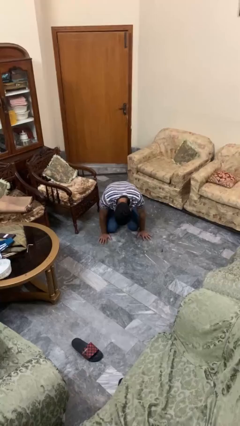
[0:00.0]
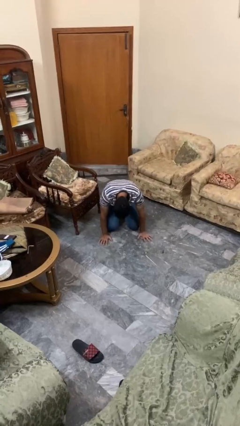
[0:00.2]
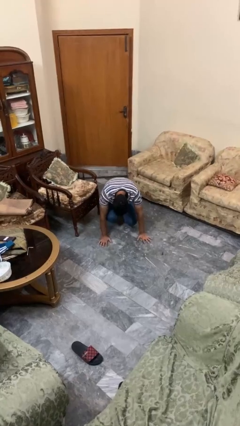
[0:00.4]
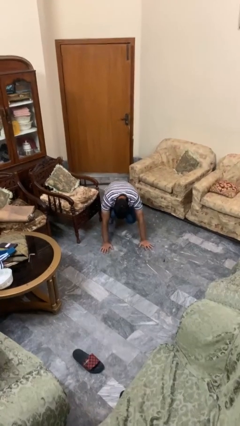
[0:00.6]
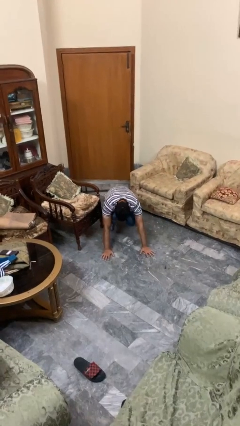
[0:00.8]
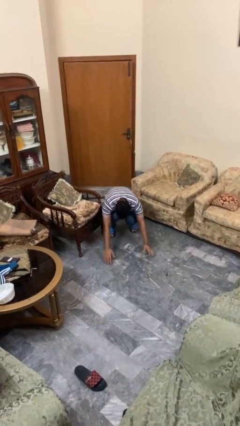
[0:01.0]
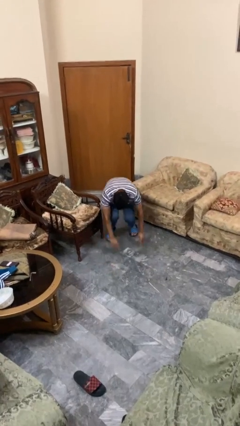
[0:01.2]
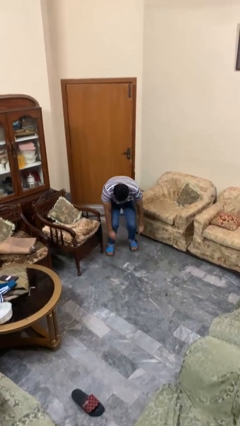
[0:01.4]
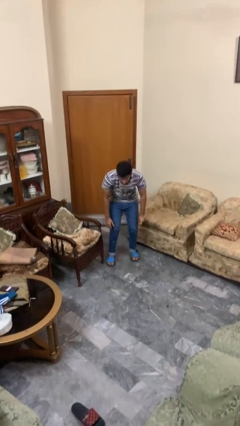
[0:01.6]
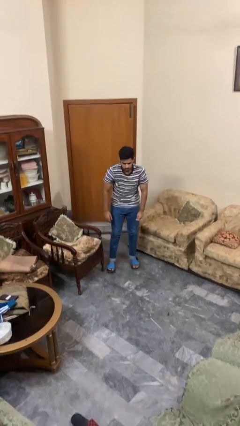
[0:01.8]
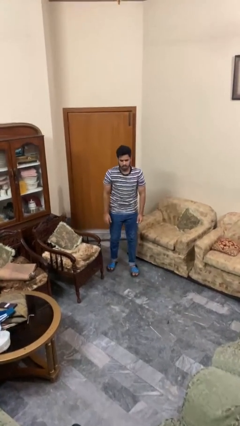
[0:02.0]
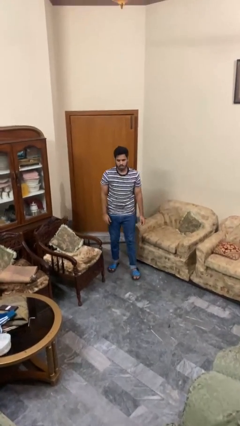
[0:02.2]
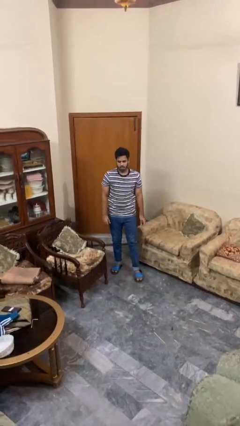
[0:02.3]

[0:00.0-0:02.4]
person stands up from floor

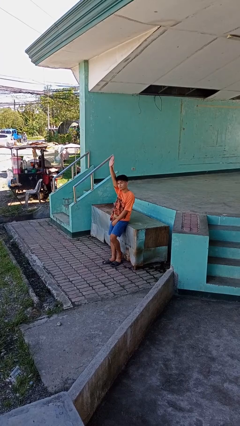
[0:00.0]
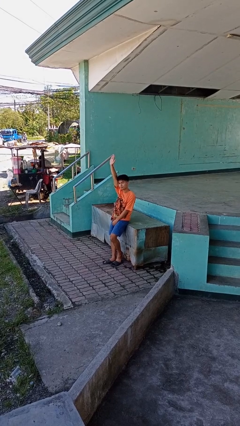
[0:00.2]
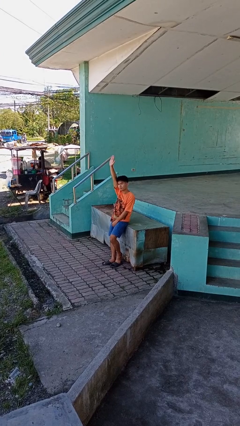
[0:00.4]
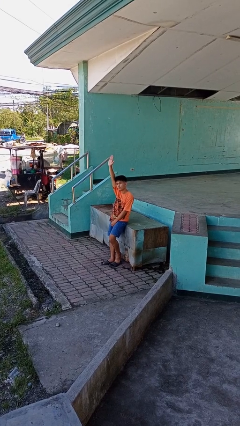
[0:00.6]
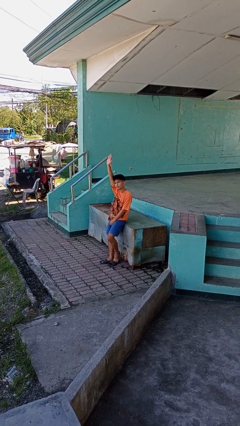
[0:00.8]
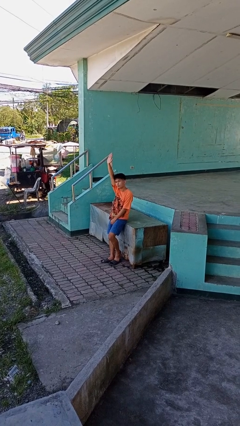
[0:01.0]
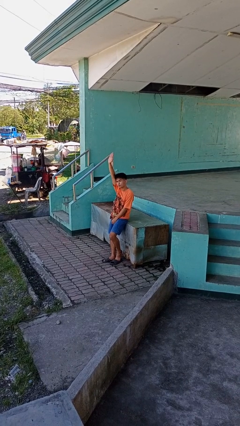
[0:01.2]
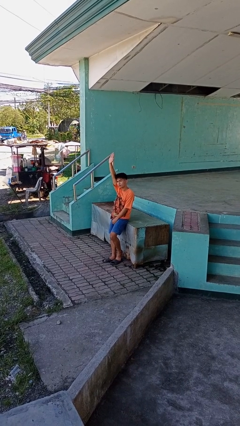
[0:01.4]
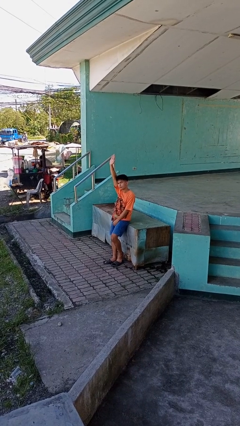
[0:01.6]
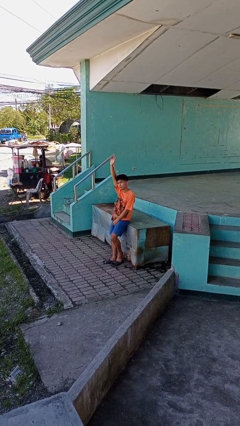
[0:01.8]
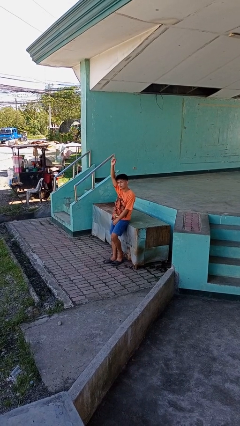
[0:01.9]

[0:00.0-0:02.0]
person gestures raise hand

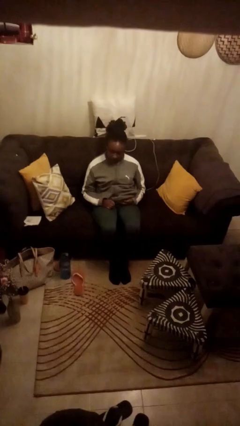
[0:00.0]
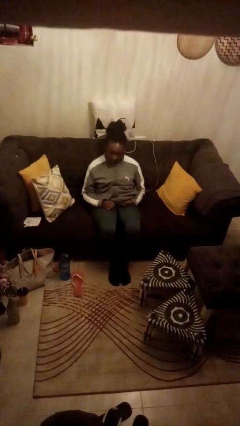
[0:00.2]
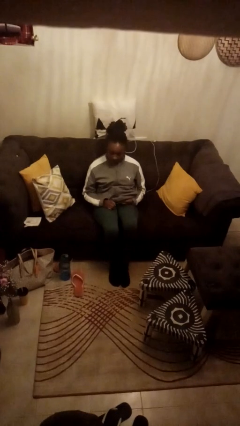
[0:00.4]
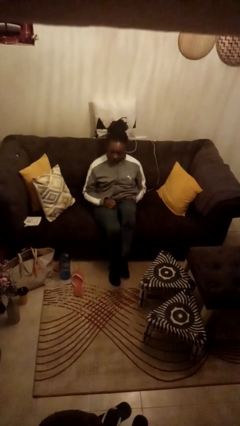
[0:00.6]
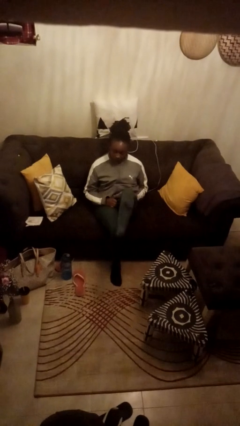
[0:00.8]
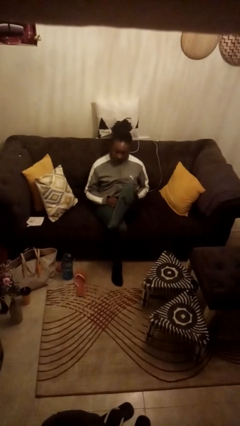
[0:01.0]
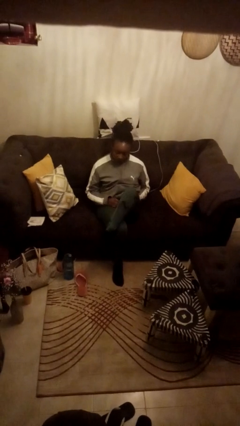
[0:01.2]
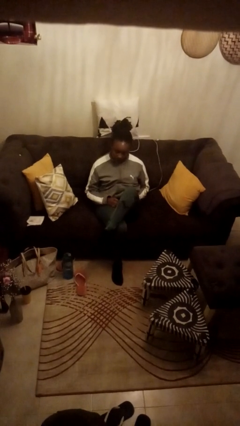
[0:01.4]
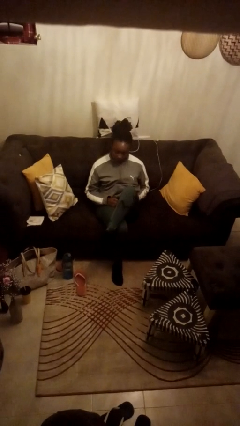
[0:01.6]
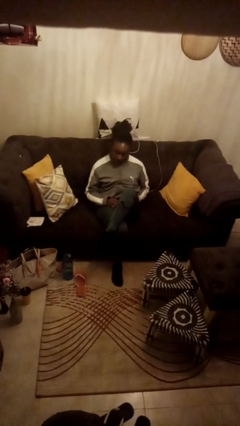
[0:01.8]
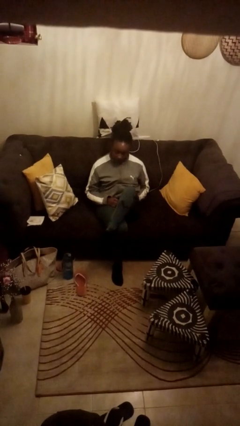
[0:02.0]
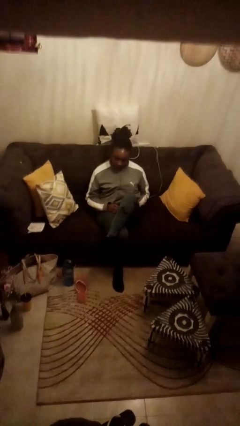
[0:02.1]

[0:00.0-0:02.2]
person crosses legs

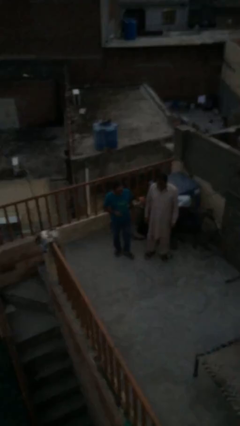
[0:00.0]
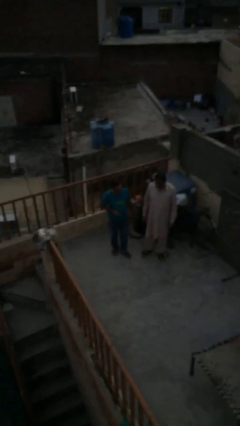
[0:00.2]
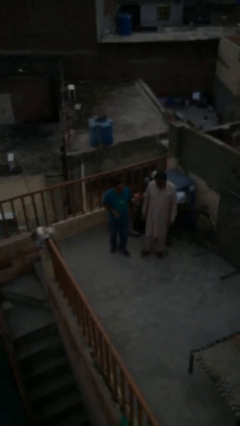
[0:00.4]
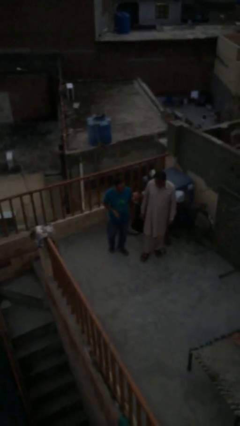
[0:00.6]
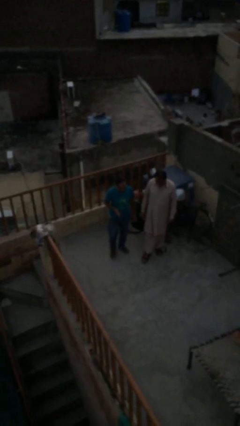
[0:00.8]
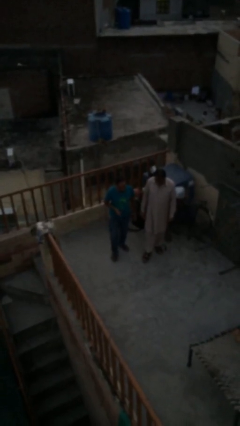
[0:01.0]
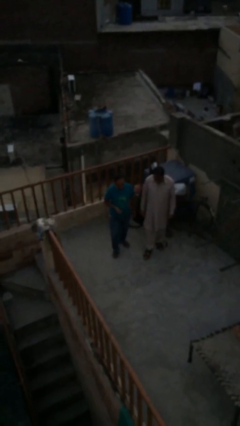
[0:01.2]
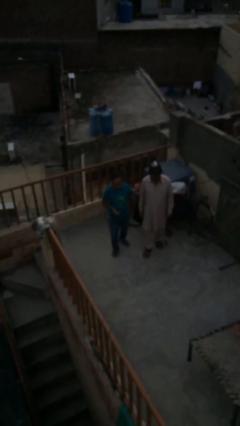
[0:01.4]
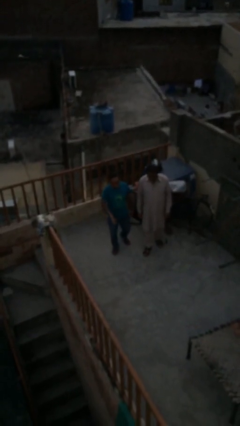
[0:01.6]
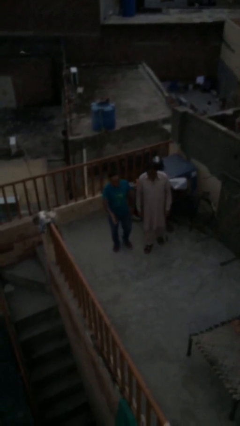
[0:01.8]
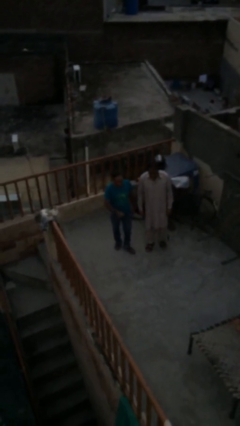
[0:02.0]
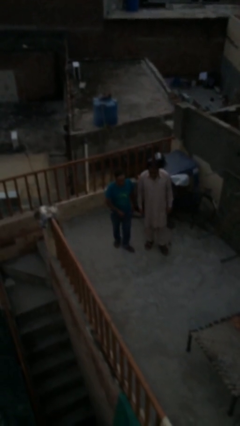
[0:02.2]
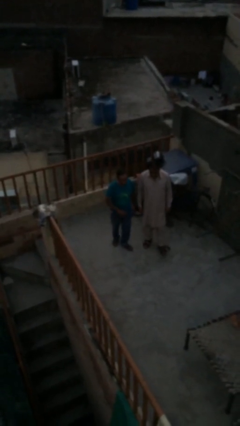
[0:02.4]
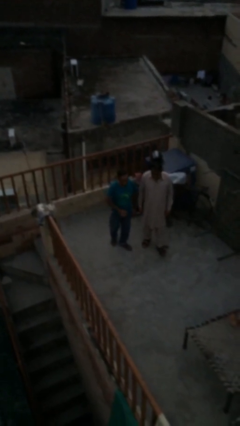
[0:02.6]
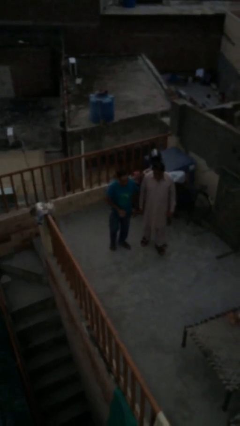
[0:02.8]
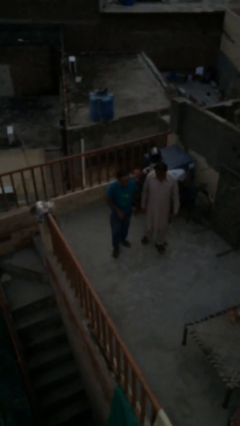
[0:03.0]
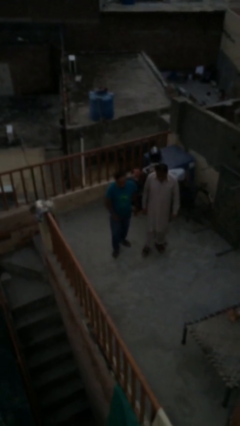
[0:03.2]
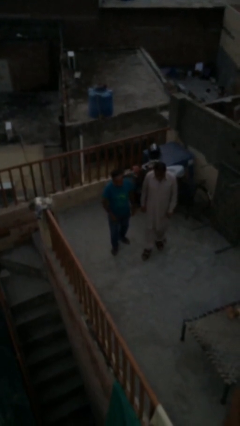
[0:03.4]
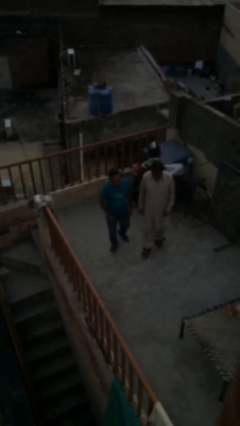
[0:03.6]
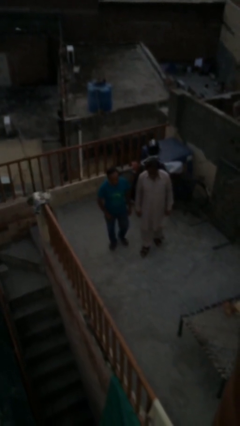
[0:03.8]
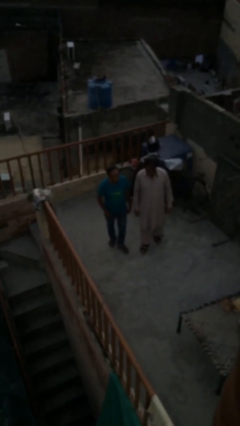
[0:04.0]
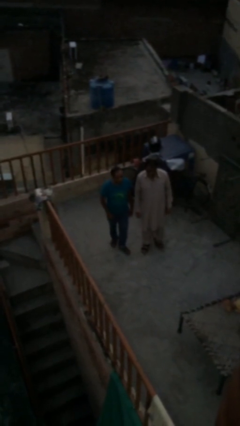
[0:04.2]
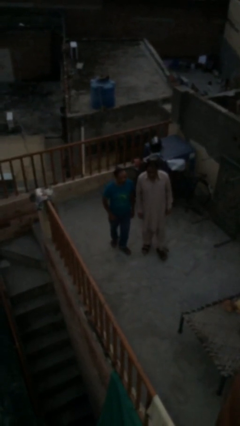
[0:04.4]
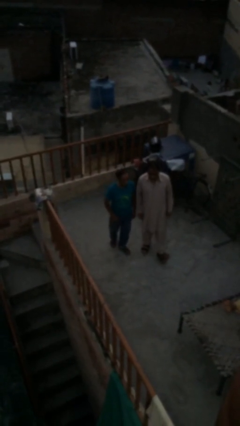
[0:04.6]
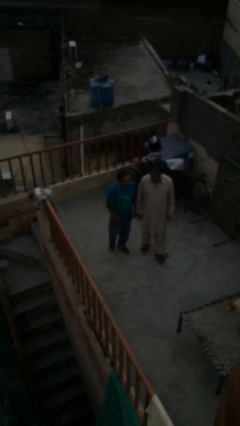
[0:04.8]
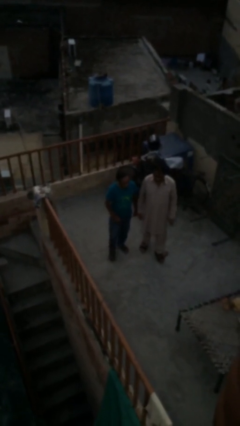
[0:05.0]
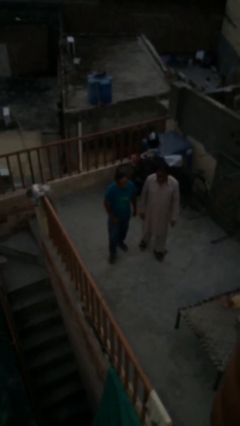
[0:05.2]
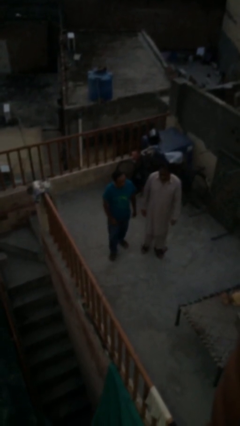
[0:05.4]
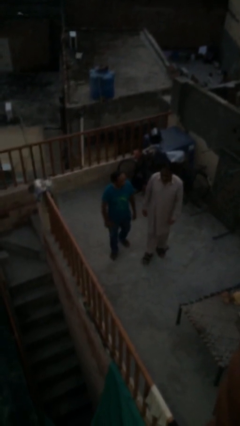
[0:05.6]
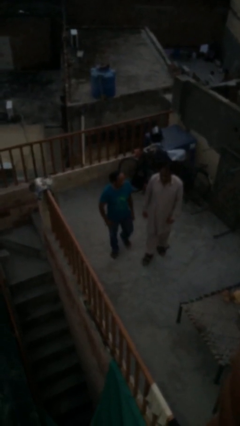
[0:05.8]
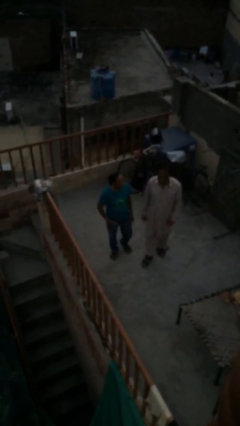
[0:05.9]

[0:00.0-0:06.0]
person talks to person

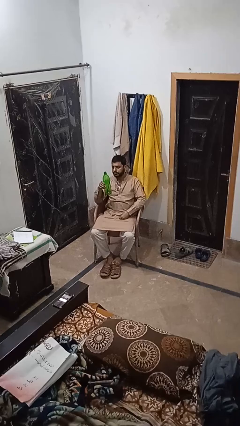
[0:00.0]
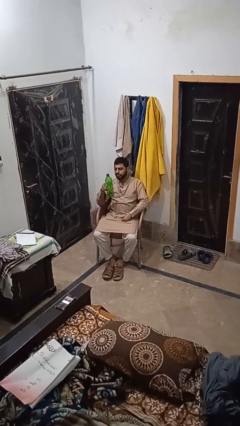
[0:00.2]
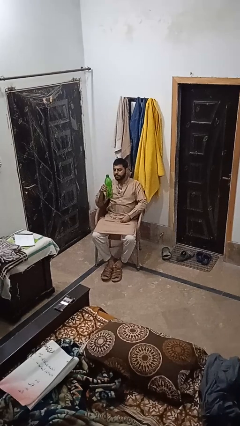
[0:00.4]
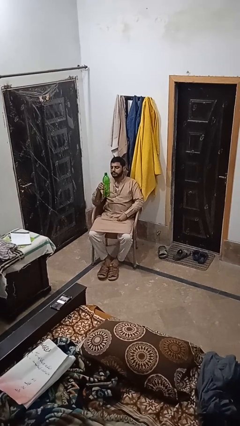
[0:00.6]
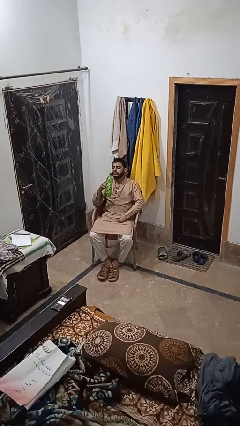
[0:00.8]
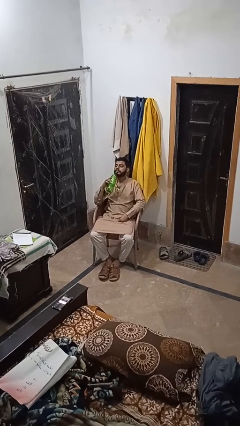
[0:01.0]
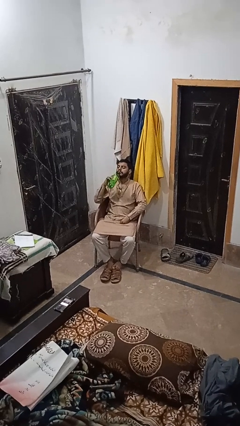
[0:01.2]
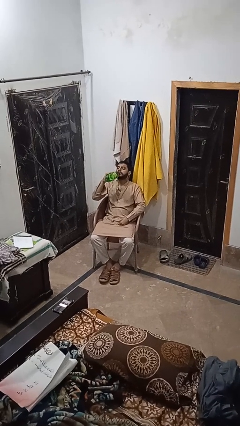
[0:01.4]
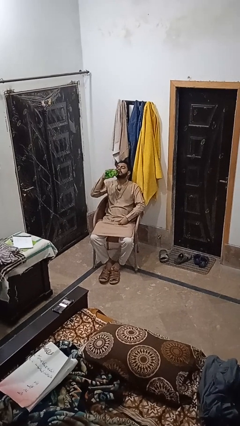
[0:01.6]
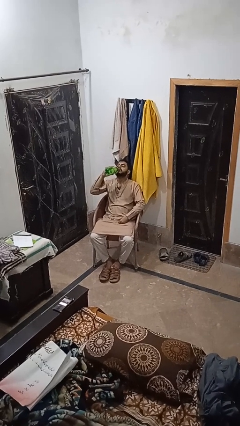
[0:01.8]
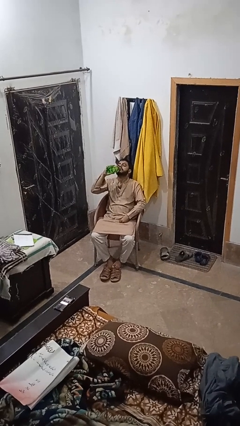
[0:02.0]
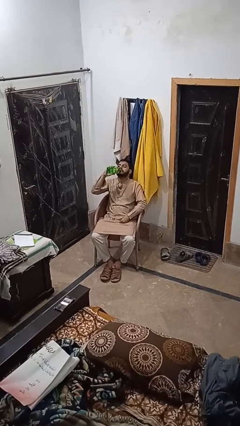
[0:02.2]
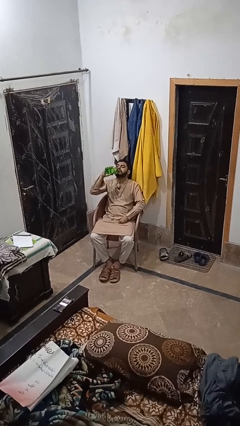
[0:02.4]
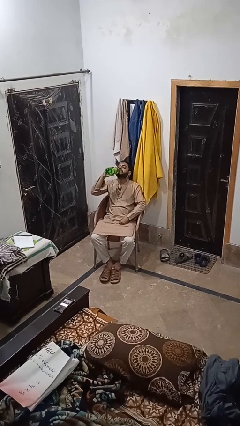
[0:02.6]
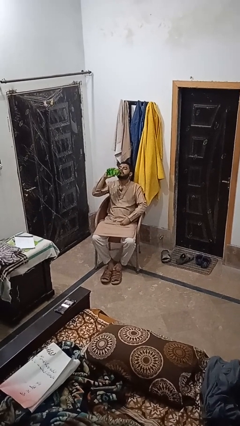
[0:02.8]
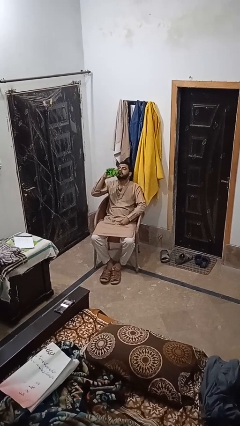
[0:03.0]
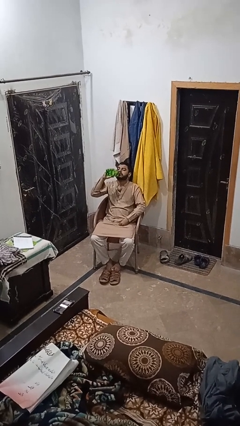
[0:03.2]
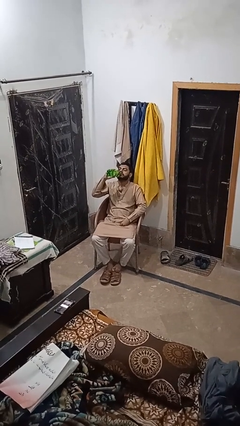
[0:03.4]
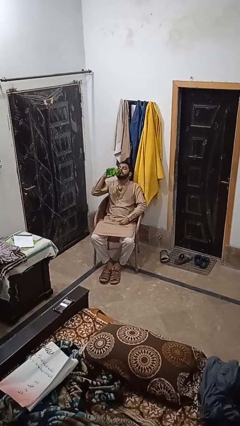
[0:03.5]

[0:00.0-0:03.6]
person drinks from bottle

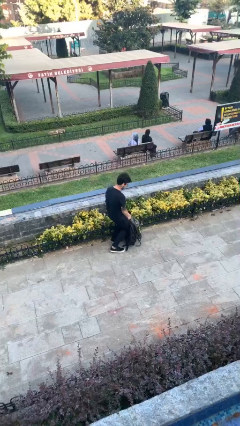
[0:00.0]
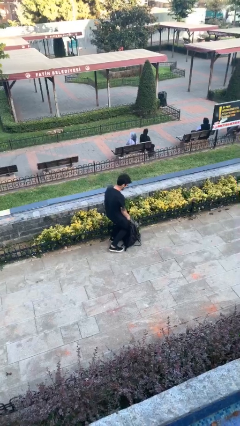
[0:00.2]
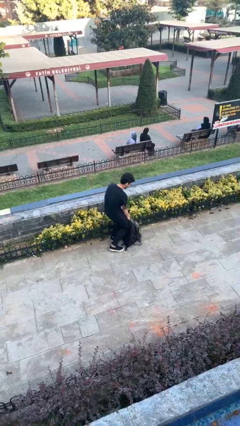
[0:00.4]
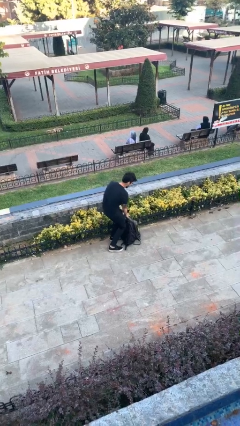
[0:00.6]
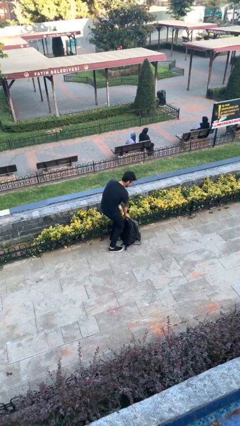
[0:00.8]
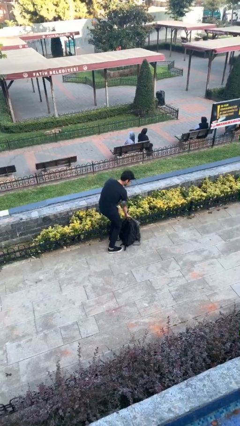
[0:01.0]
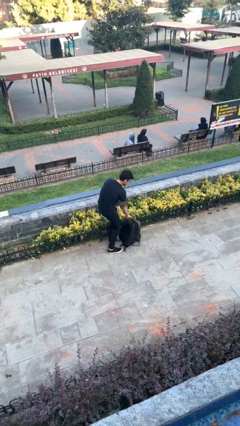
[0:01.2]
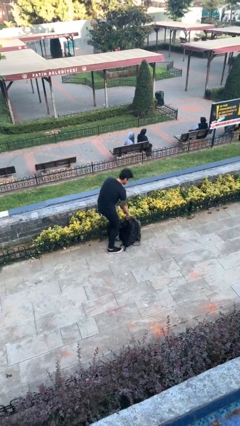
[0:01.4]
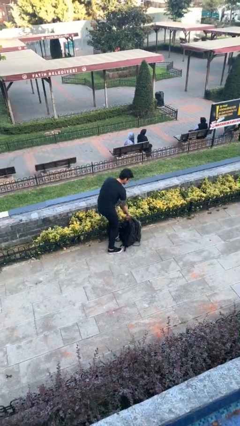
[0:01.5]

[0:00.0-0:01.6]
person puts down object on floor
